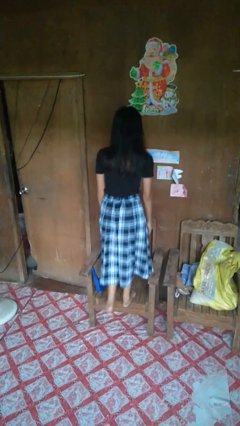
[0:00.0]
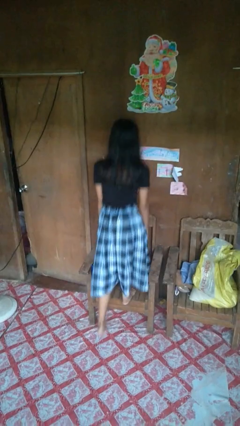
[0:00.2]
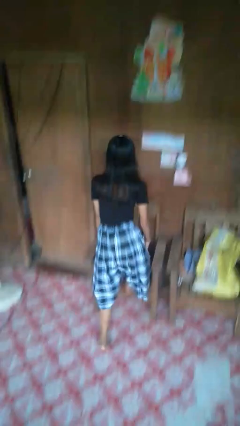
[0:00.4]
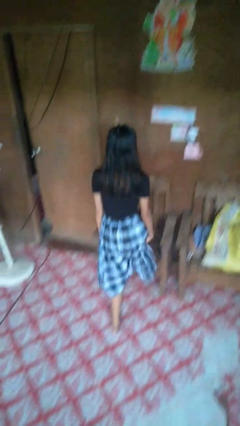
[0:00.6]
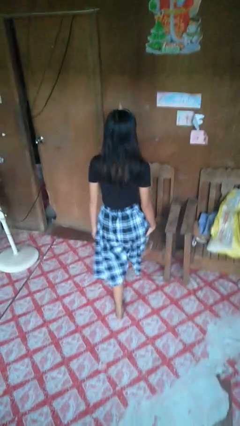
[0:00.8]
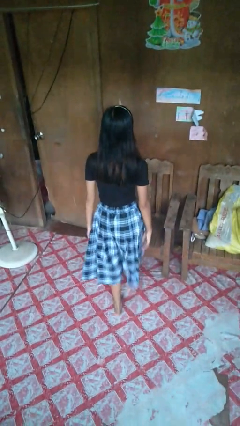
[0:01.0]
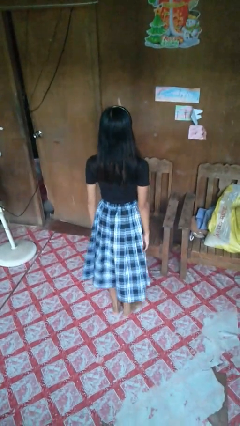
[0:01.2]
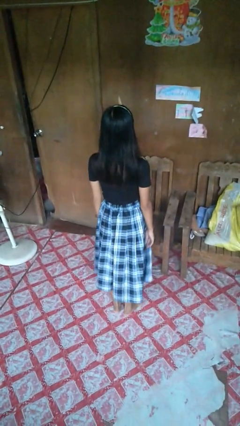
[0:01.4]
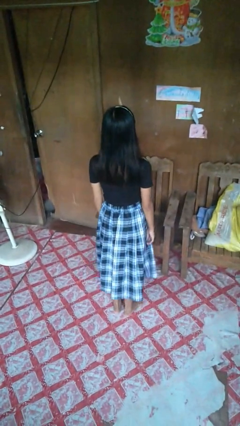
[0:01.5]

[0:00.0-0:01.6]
person climbs off chair

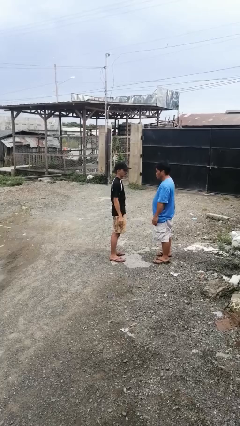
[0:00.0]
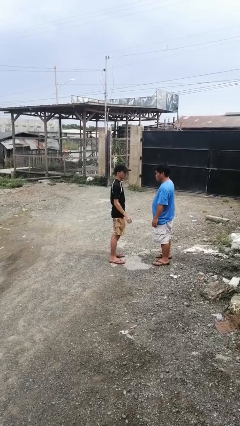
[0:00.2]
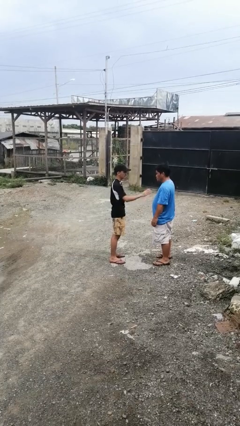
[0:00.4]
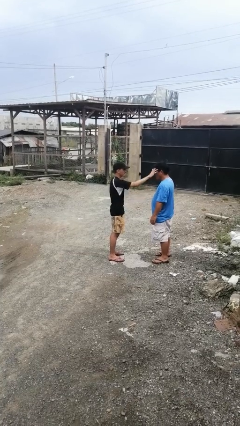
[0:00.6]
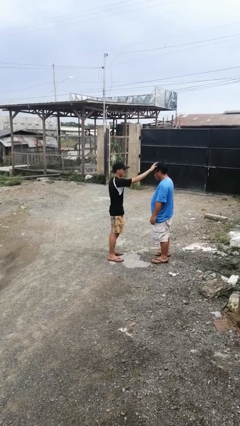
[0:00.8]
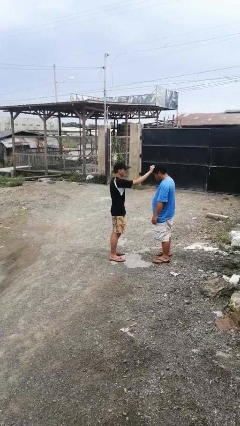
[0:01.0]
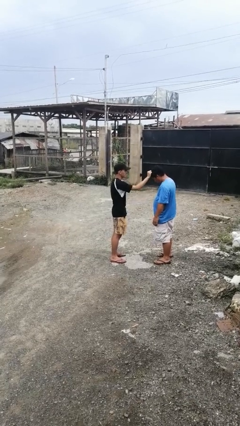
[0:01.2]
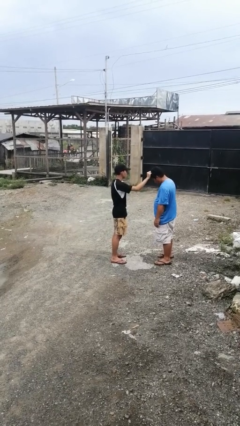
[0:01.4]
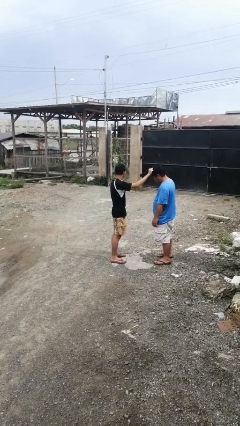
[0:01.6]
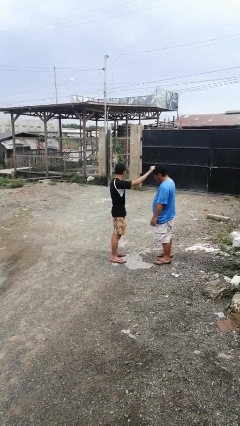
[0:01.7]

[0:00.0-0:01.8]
person grabs person by hair

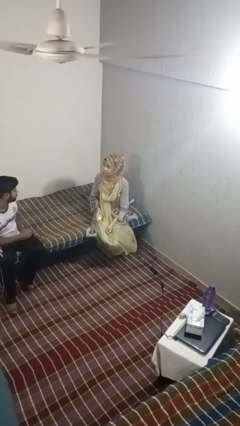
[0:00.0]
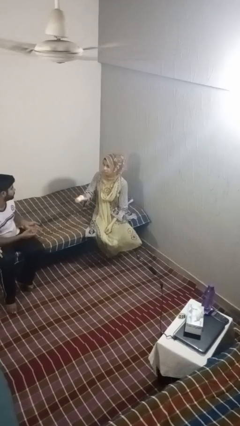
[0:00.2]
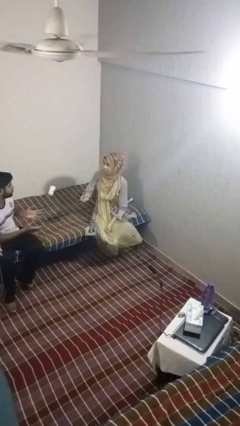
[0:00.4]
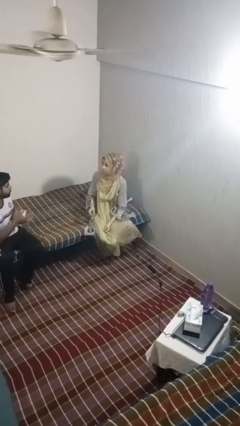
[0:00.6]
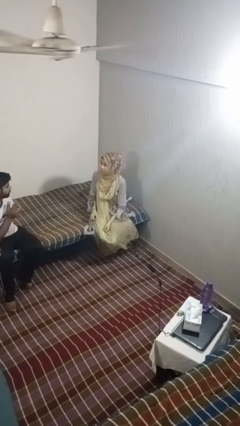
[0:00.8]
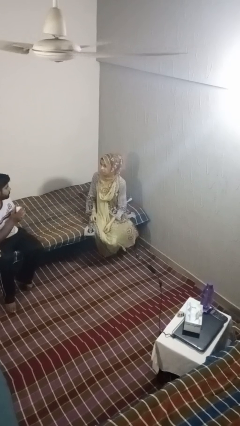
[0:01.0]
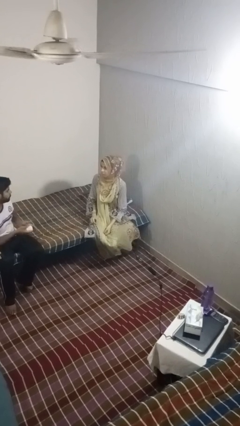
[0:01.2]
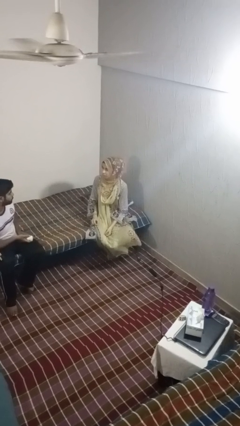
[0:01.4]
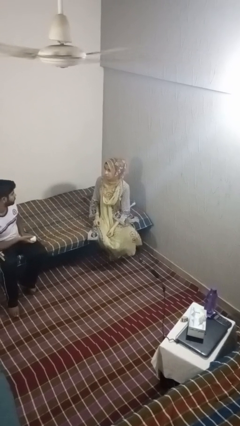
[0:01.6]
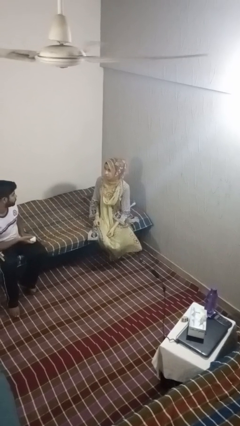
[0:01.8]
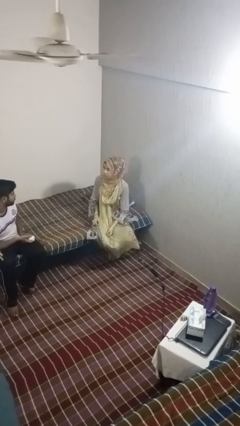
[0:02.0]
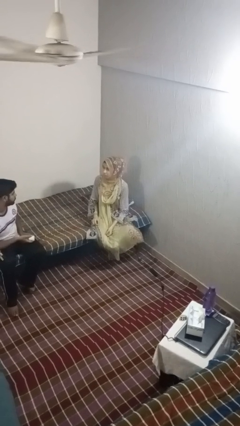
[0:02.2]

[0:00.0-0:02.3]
person throws object to person

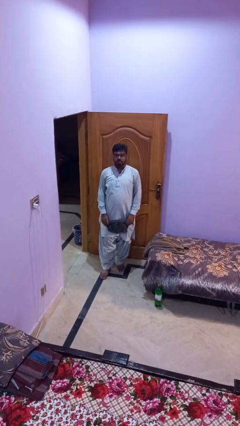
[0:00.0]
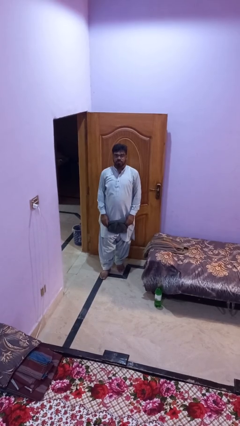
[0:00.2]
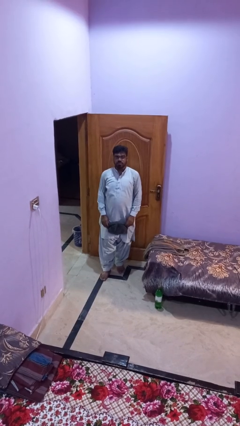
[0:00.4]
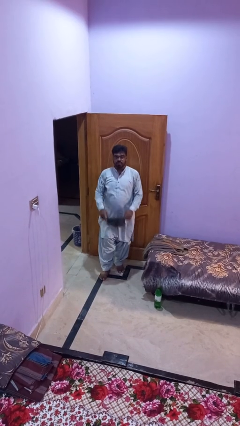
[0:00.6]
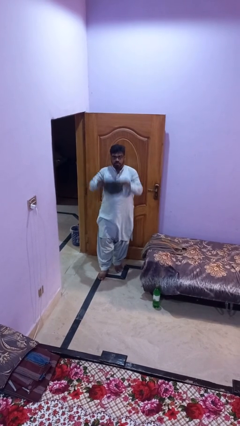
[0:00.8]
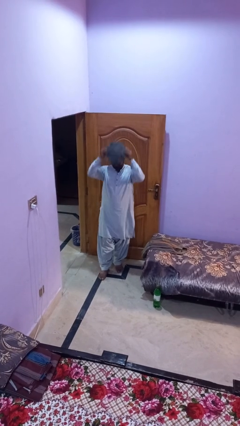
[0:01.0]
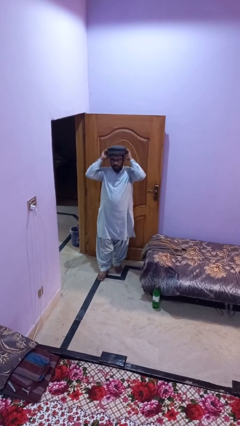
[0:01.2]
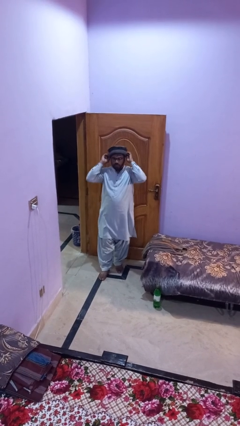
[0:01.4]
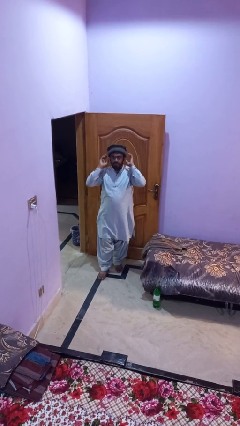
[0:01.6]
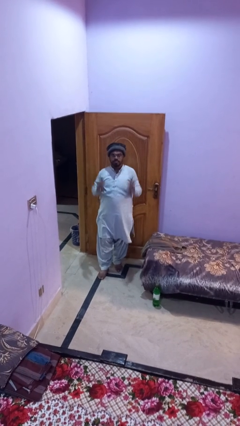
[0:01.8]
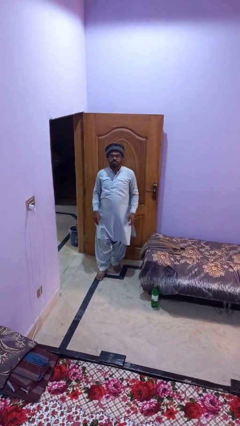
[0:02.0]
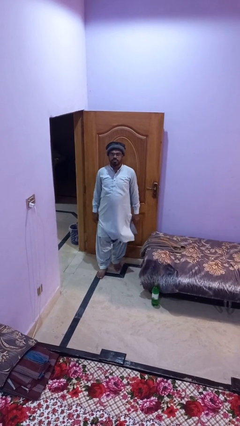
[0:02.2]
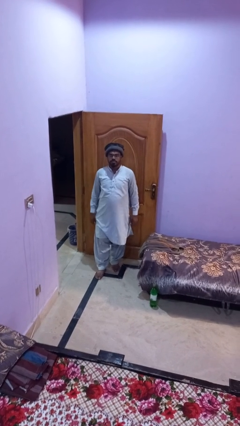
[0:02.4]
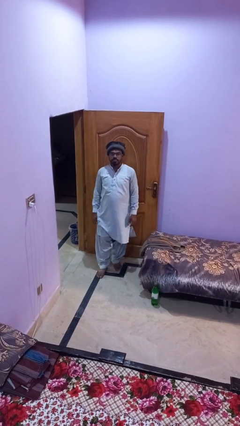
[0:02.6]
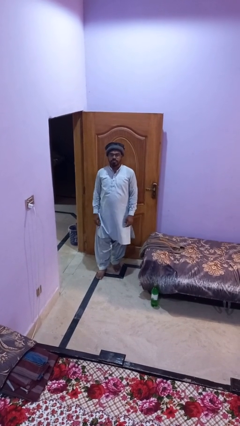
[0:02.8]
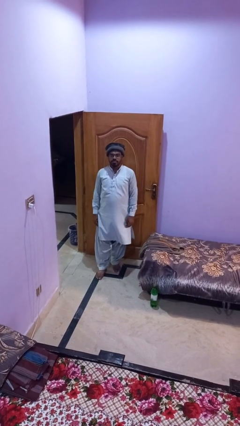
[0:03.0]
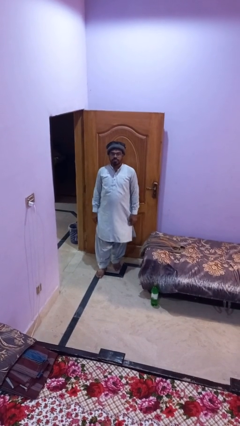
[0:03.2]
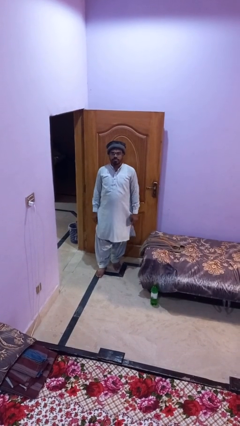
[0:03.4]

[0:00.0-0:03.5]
person puts on hat

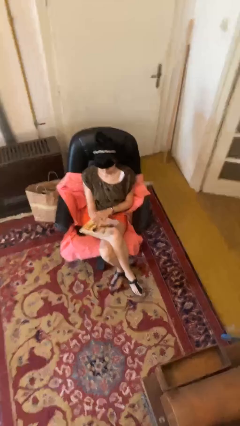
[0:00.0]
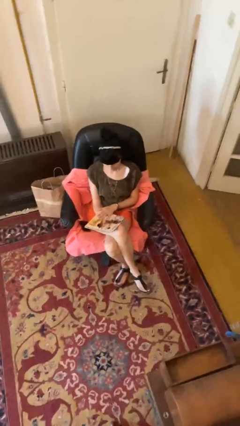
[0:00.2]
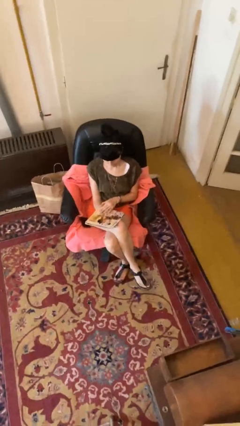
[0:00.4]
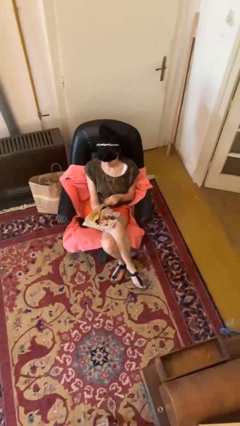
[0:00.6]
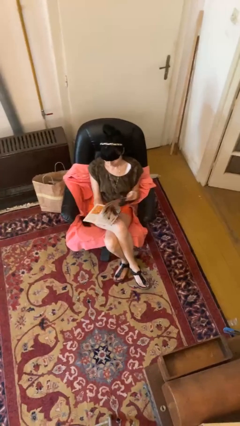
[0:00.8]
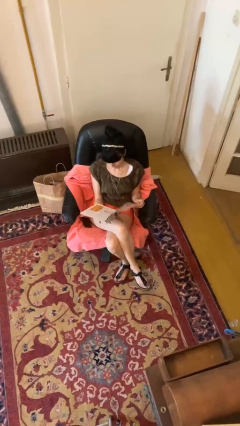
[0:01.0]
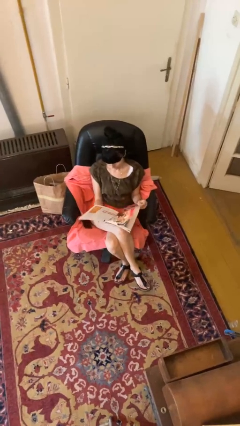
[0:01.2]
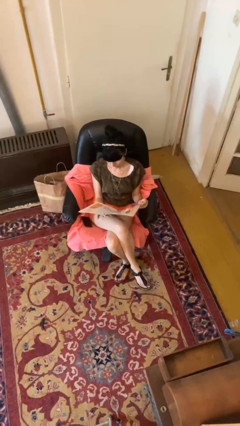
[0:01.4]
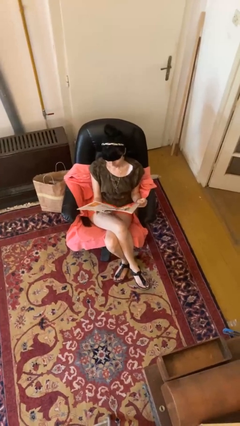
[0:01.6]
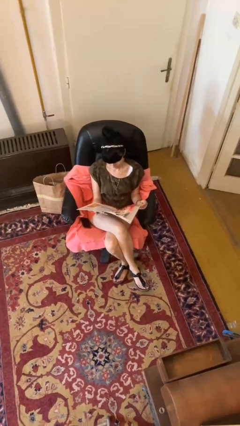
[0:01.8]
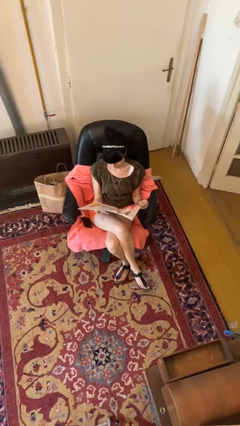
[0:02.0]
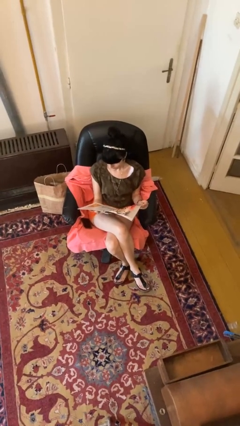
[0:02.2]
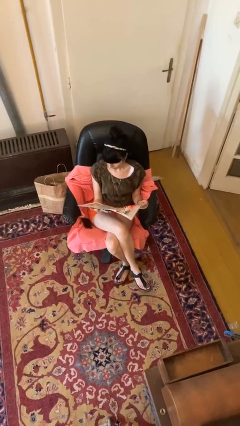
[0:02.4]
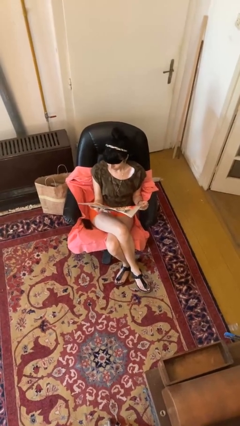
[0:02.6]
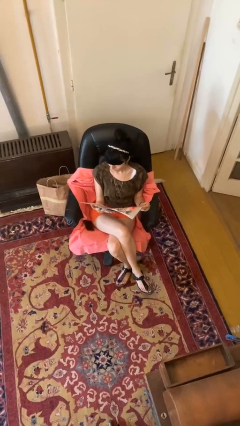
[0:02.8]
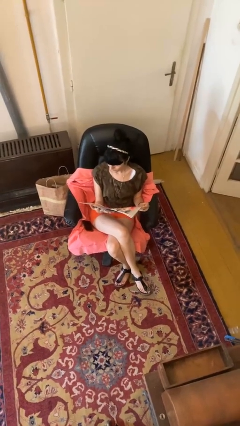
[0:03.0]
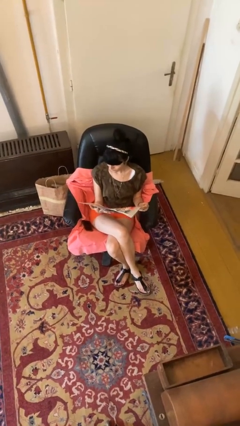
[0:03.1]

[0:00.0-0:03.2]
person reads magazine

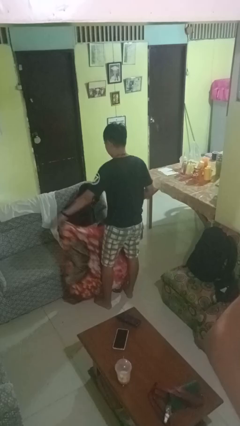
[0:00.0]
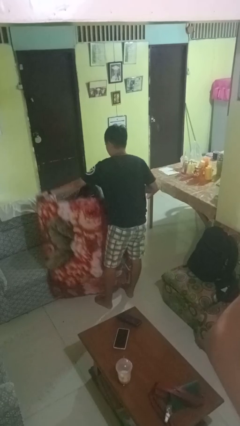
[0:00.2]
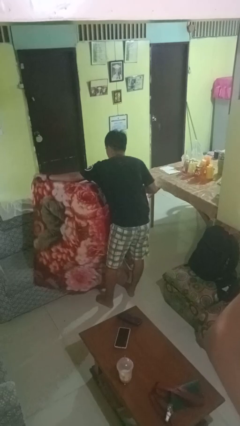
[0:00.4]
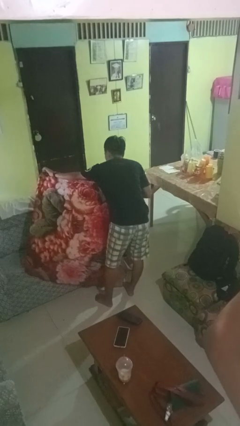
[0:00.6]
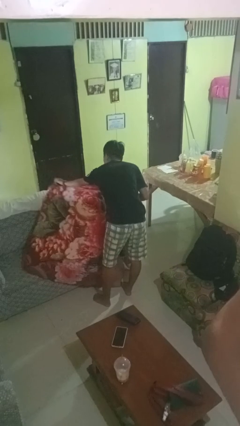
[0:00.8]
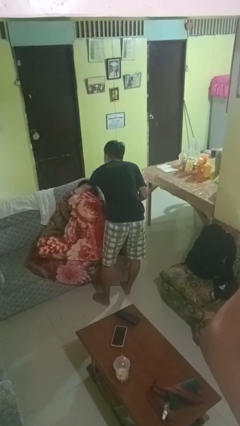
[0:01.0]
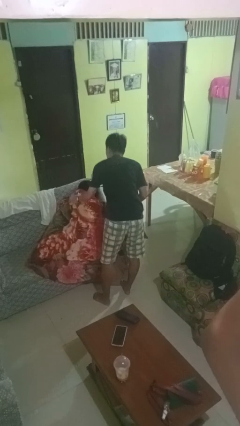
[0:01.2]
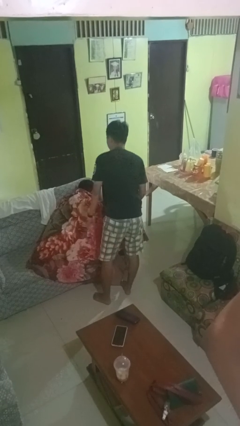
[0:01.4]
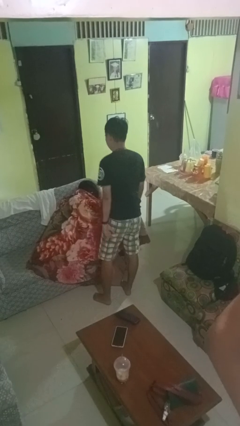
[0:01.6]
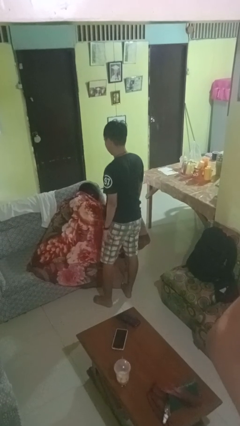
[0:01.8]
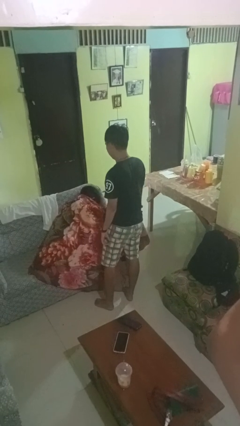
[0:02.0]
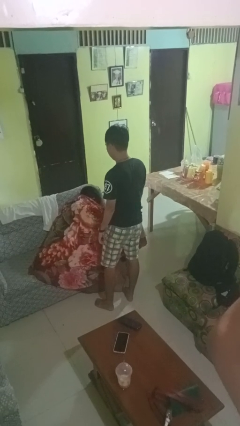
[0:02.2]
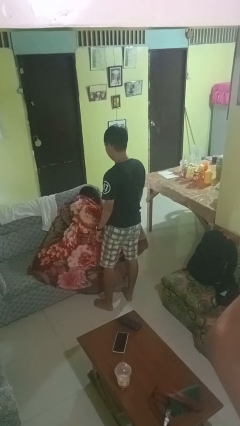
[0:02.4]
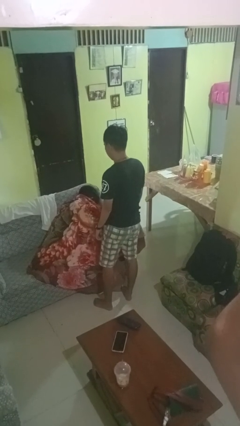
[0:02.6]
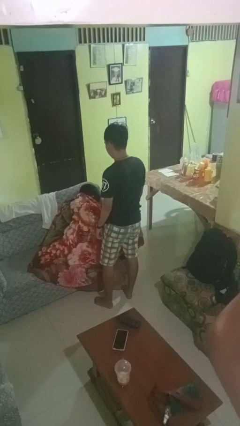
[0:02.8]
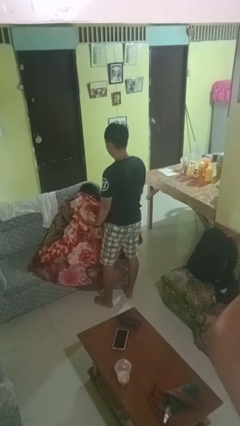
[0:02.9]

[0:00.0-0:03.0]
person covers friend with blanket

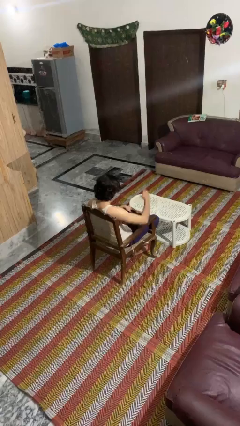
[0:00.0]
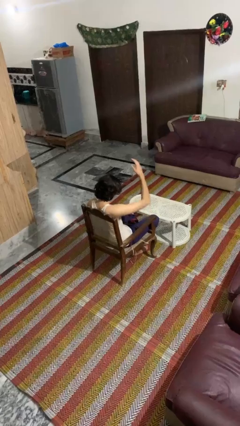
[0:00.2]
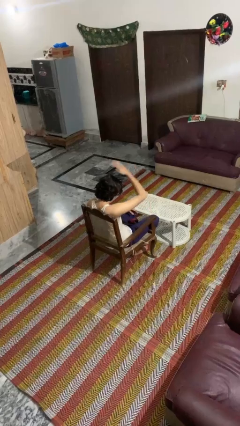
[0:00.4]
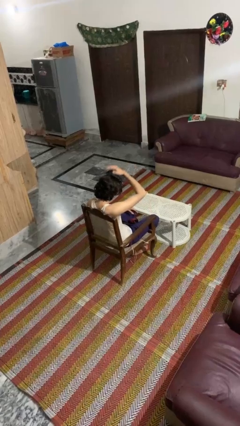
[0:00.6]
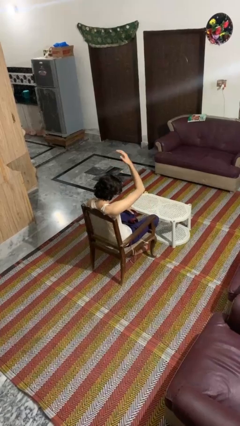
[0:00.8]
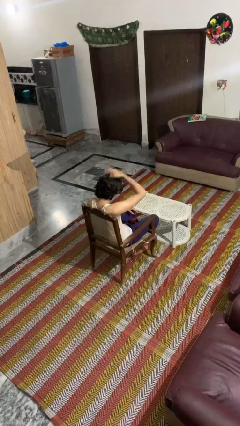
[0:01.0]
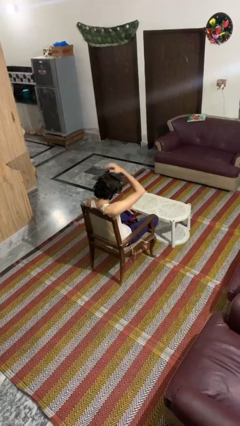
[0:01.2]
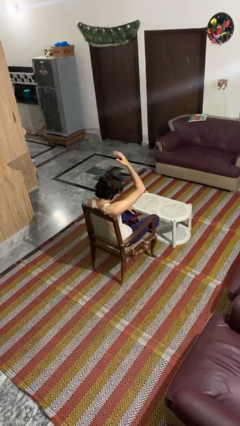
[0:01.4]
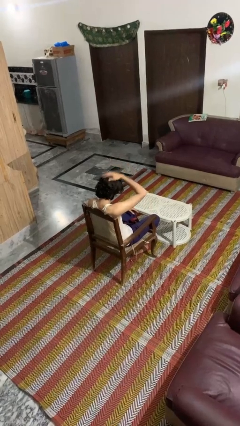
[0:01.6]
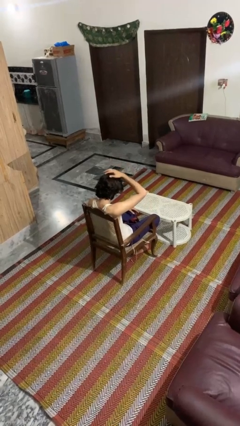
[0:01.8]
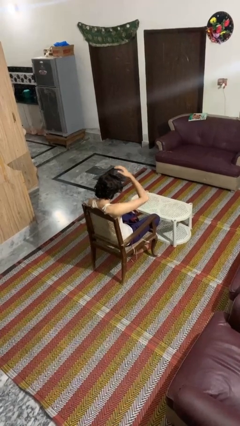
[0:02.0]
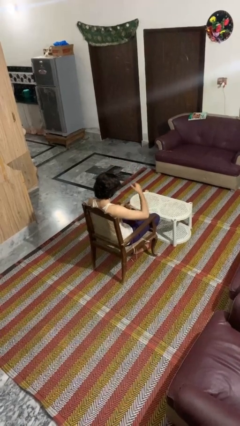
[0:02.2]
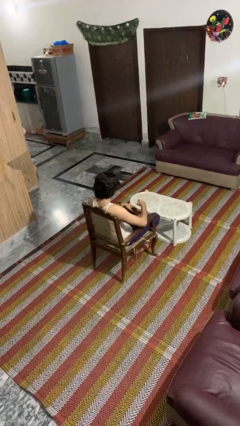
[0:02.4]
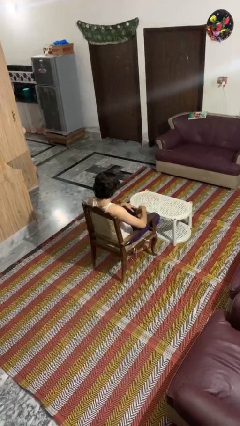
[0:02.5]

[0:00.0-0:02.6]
person pats head
